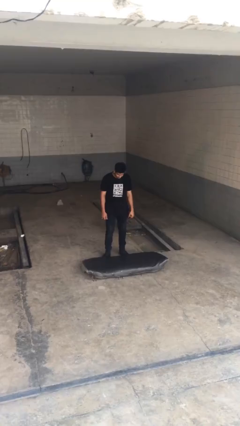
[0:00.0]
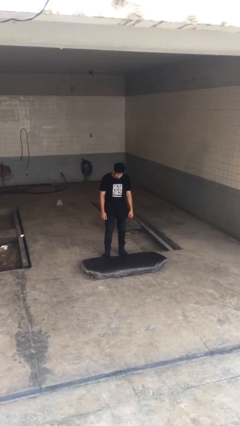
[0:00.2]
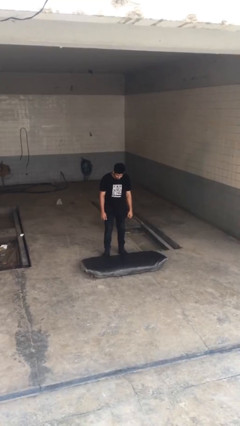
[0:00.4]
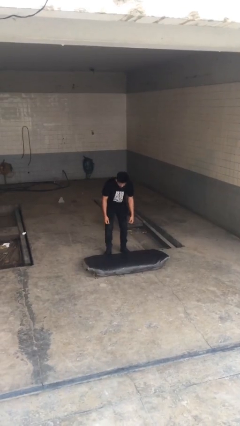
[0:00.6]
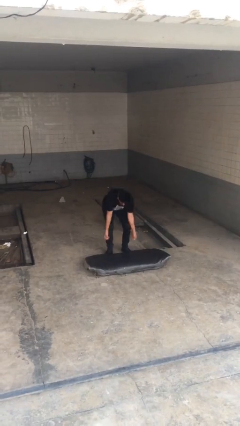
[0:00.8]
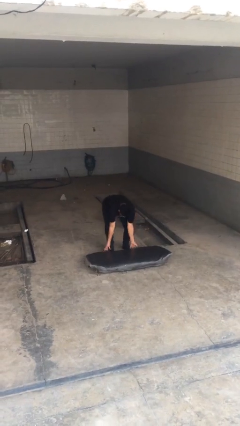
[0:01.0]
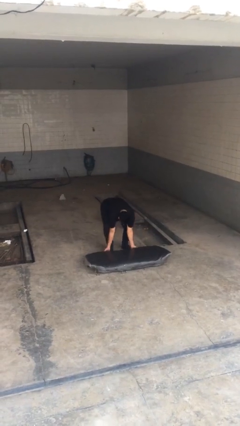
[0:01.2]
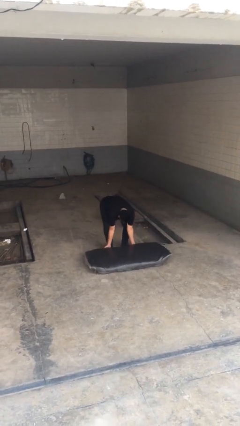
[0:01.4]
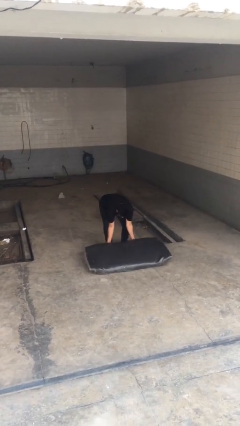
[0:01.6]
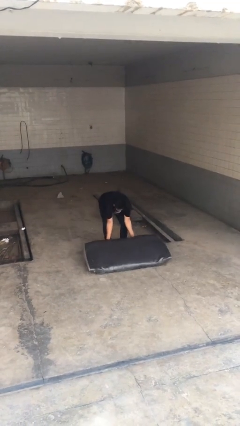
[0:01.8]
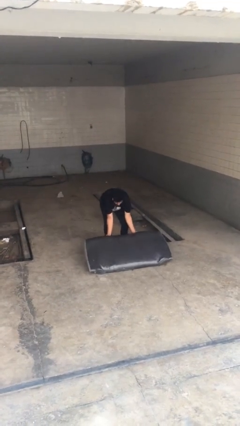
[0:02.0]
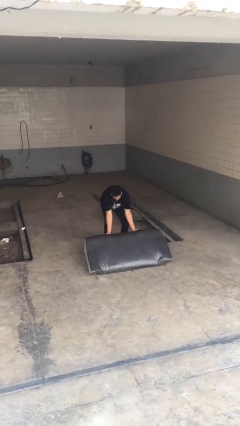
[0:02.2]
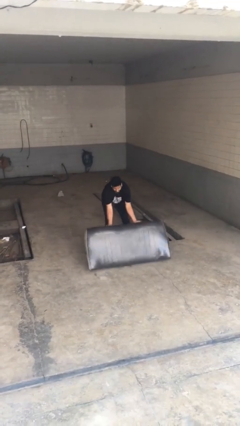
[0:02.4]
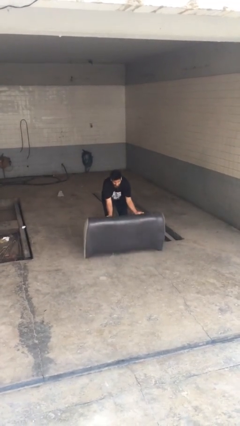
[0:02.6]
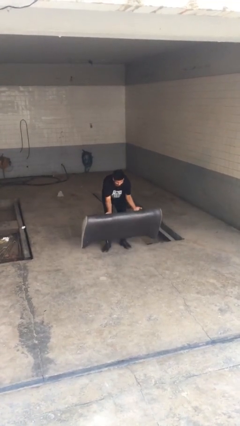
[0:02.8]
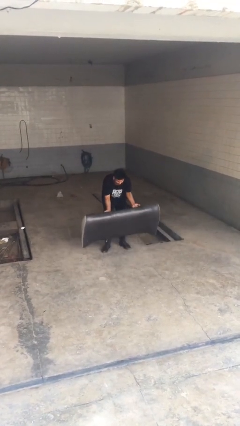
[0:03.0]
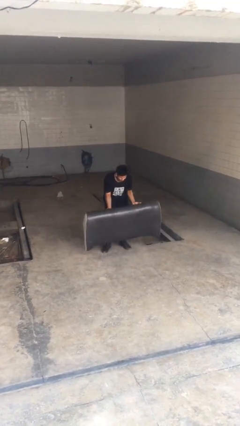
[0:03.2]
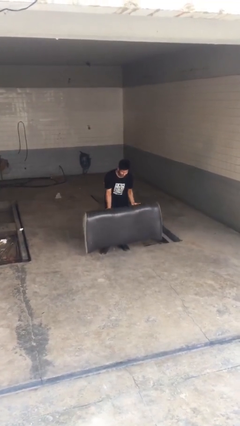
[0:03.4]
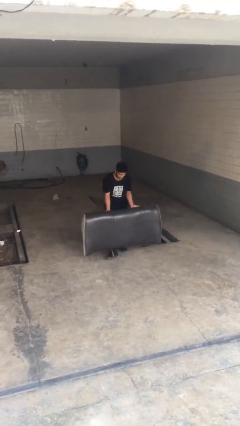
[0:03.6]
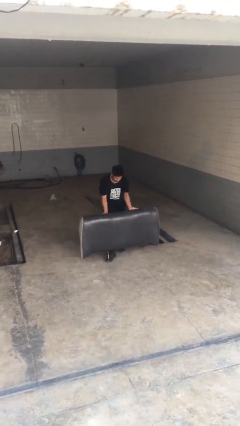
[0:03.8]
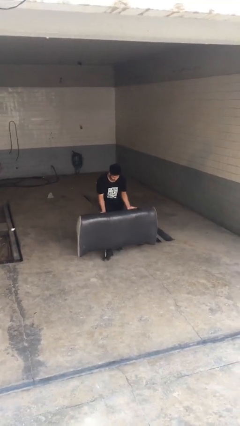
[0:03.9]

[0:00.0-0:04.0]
person picks up object from floor

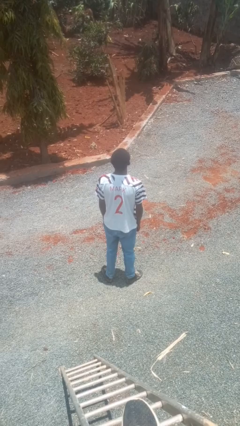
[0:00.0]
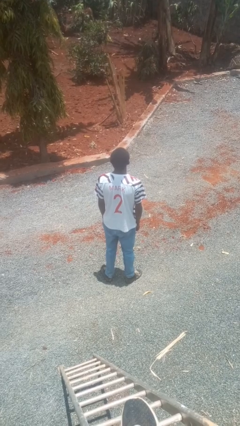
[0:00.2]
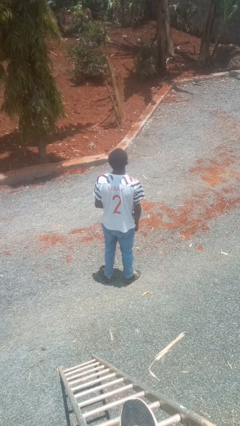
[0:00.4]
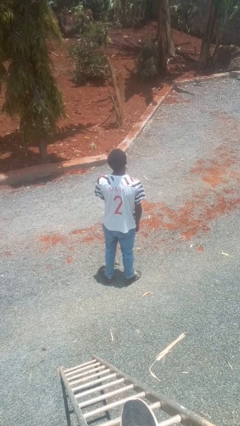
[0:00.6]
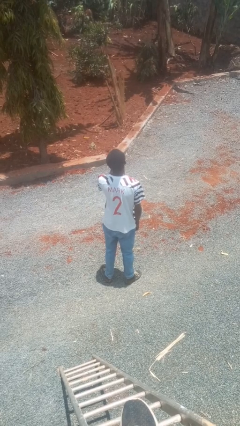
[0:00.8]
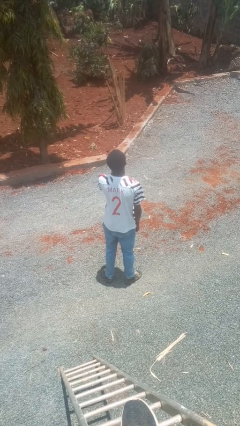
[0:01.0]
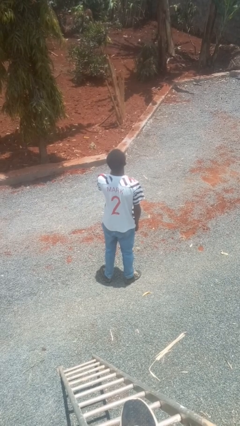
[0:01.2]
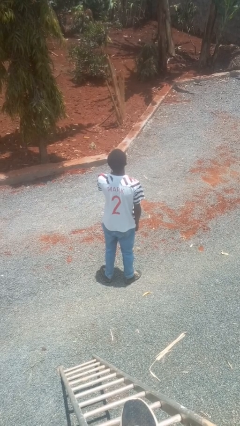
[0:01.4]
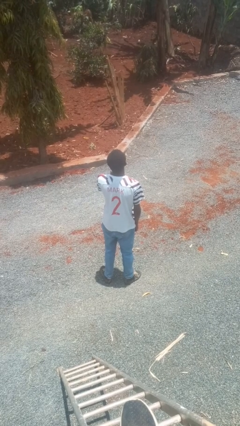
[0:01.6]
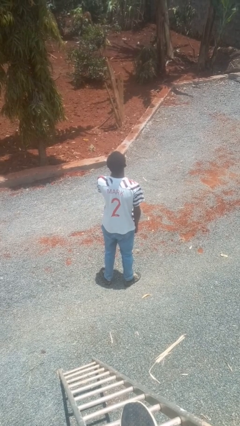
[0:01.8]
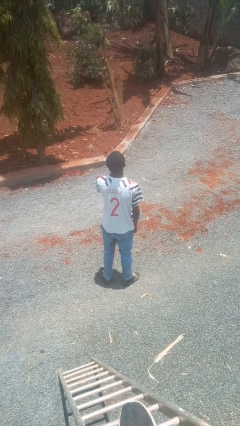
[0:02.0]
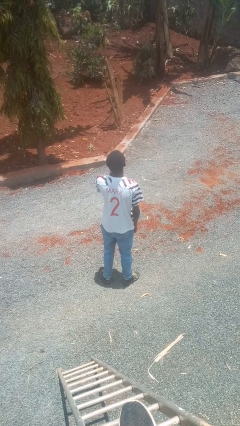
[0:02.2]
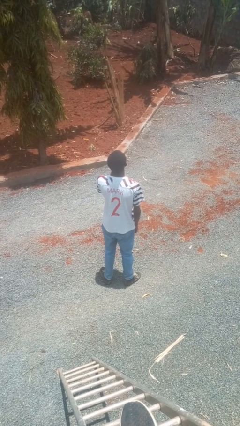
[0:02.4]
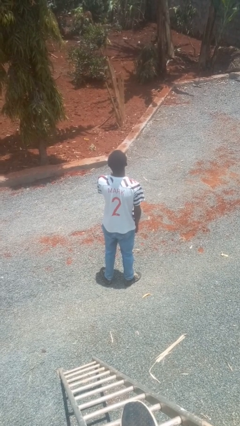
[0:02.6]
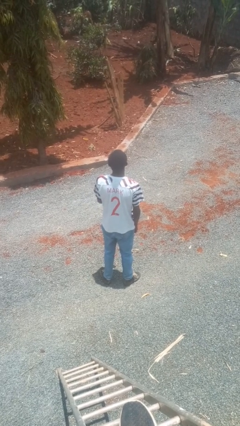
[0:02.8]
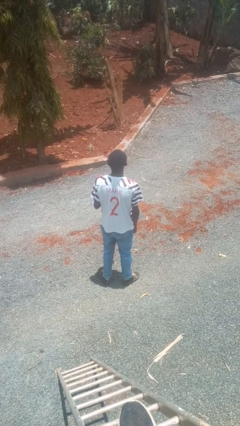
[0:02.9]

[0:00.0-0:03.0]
person strokes chin

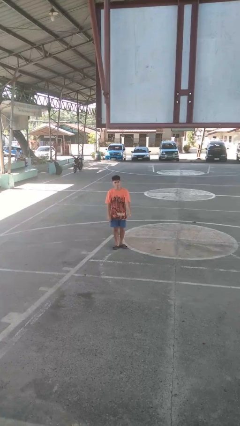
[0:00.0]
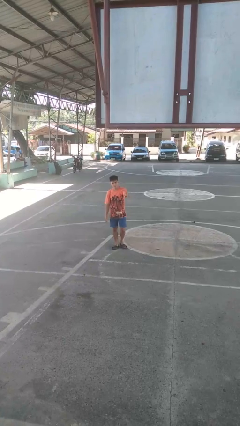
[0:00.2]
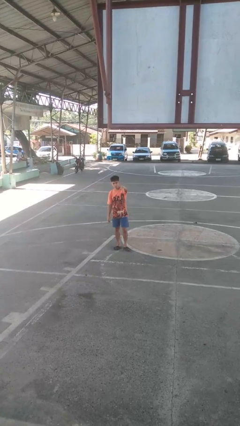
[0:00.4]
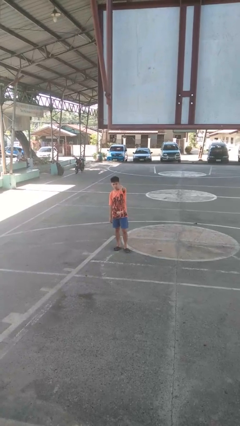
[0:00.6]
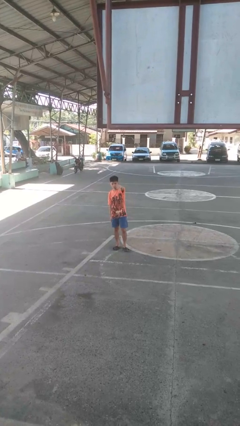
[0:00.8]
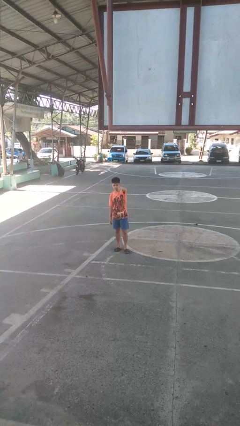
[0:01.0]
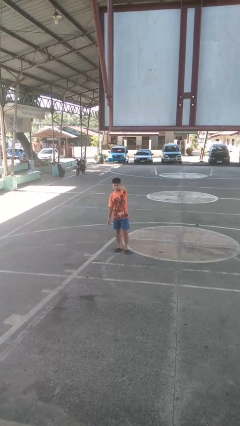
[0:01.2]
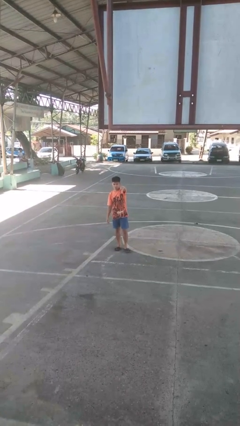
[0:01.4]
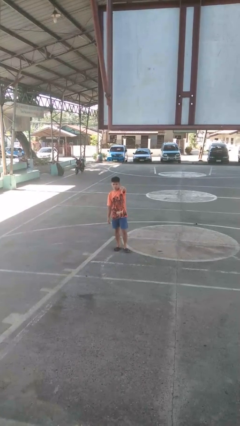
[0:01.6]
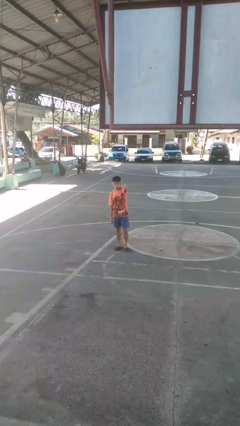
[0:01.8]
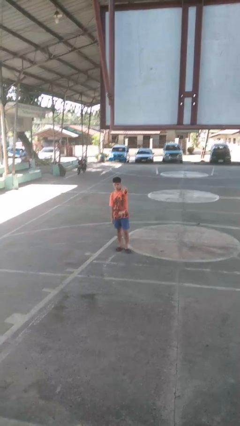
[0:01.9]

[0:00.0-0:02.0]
person gestures thumbs down

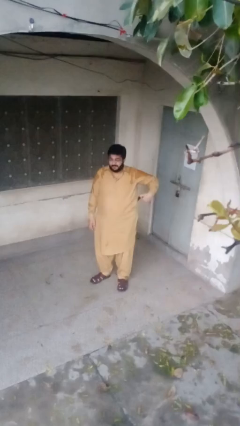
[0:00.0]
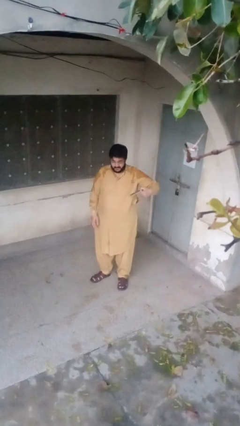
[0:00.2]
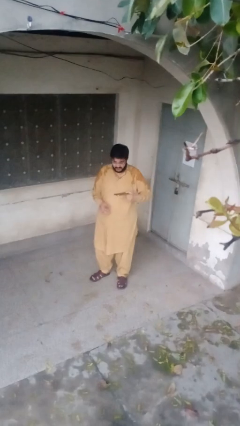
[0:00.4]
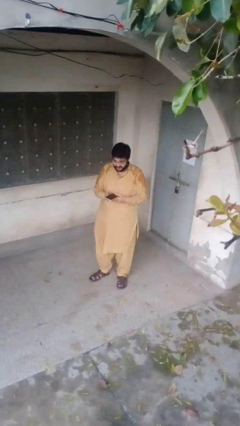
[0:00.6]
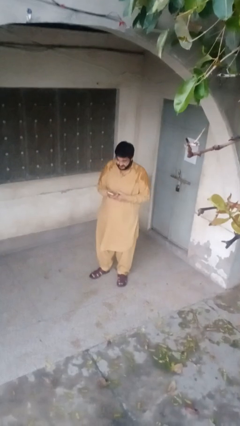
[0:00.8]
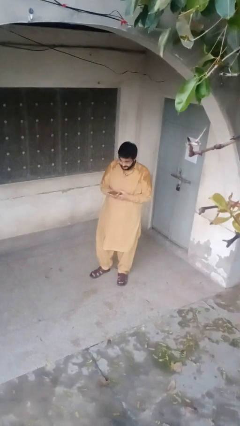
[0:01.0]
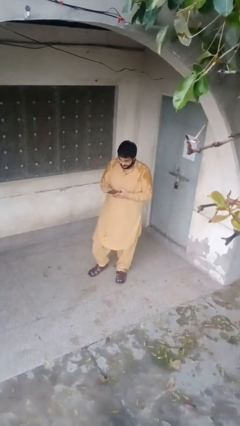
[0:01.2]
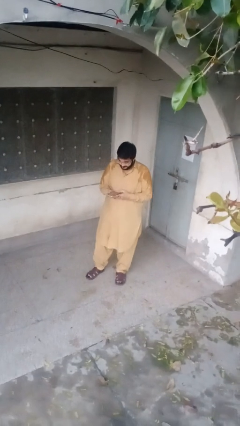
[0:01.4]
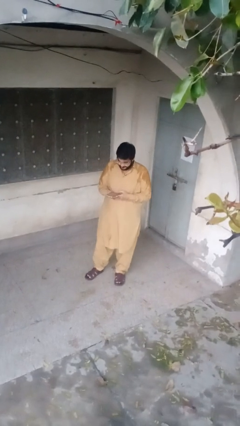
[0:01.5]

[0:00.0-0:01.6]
person takes phone from pocket

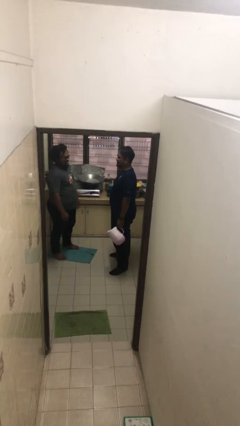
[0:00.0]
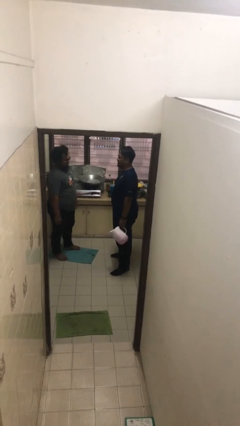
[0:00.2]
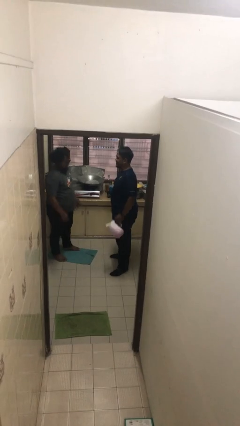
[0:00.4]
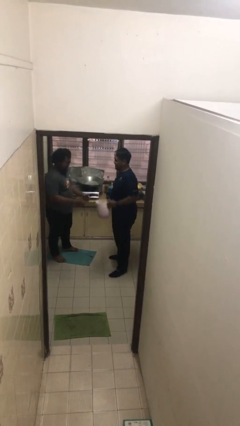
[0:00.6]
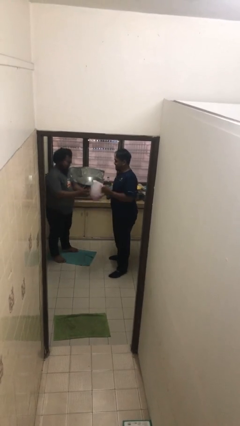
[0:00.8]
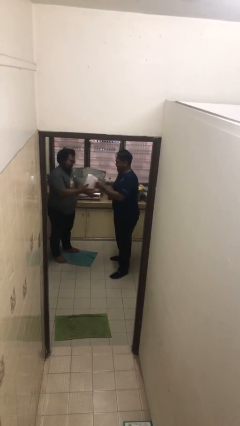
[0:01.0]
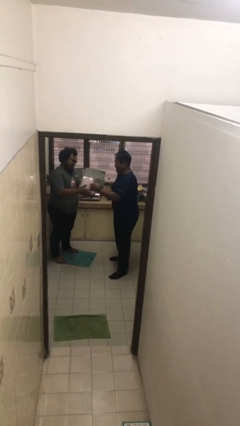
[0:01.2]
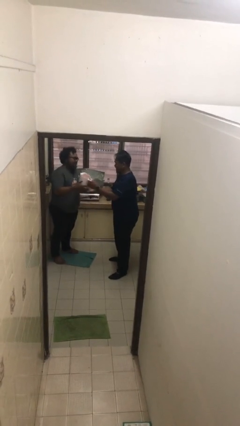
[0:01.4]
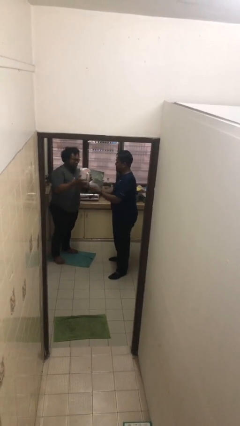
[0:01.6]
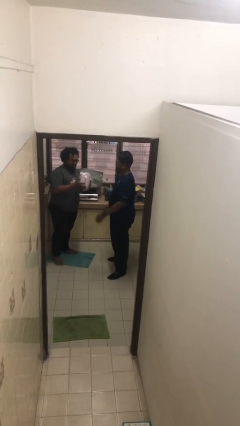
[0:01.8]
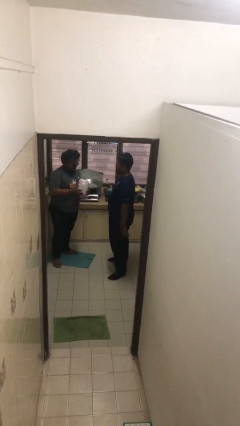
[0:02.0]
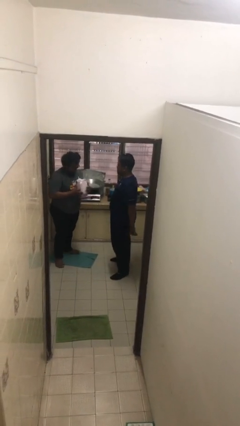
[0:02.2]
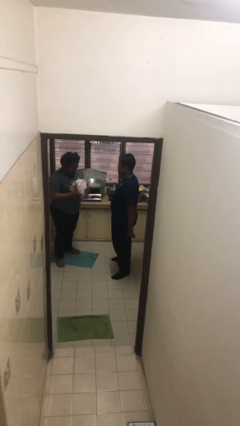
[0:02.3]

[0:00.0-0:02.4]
person transfers object to person

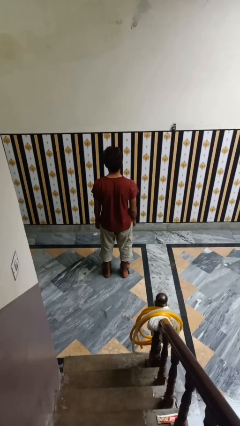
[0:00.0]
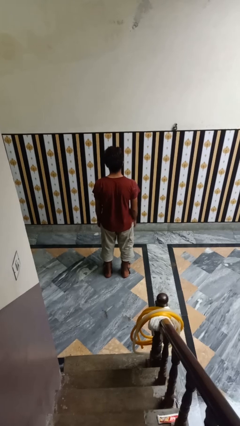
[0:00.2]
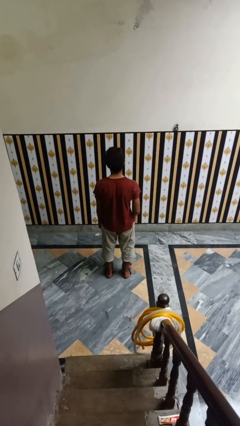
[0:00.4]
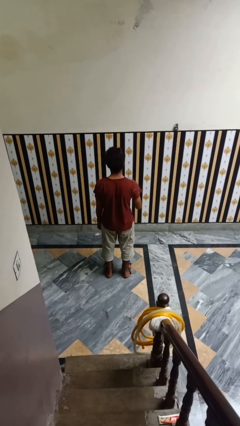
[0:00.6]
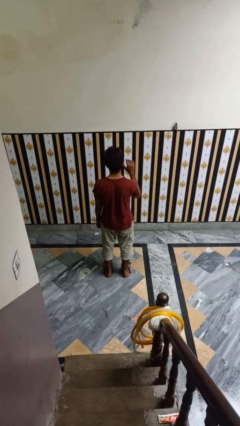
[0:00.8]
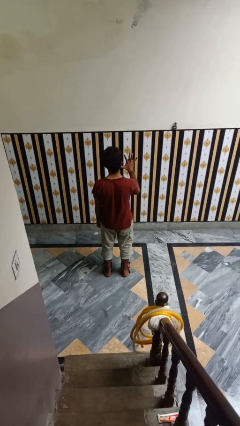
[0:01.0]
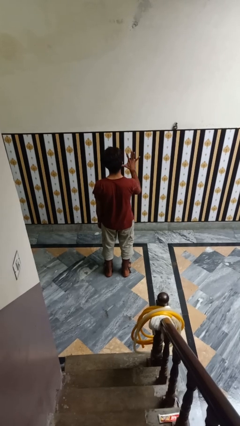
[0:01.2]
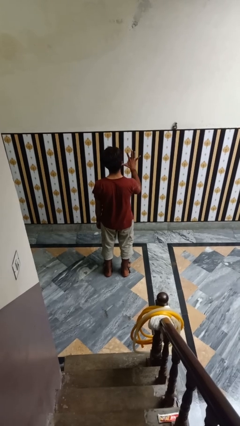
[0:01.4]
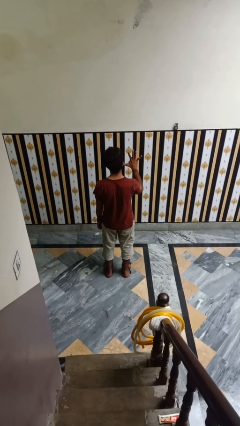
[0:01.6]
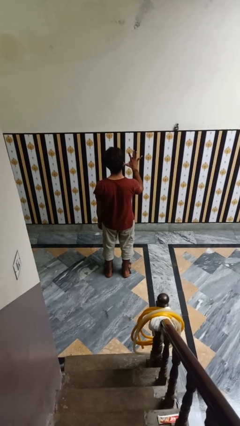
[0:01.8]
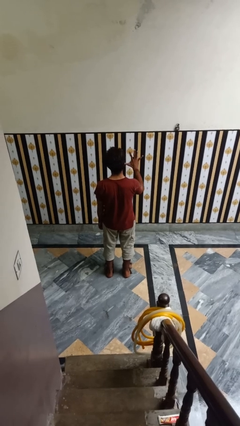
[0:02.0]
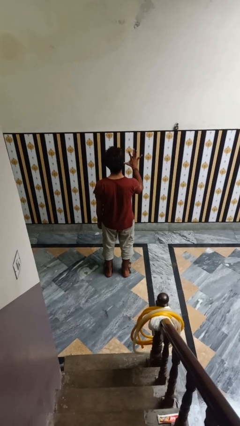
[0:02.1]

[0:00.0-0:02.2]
person gestures number five

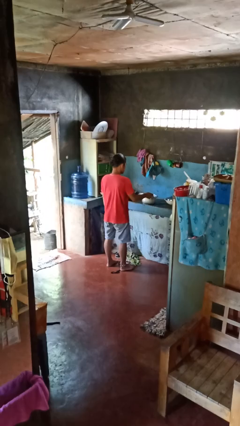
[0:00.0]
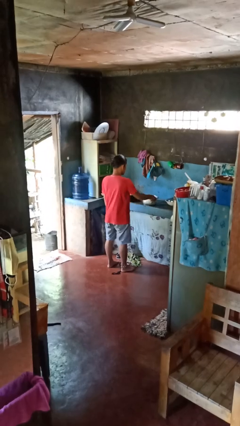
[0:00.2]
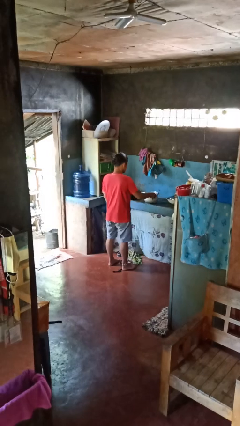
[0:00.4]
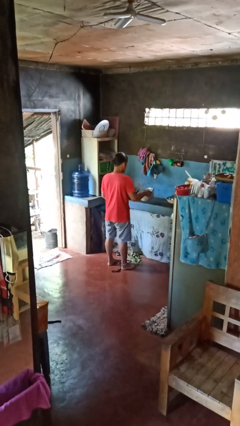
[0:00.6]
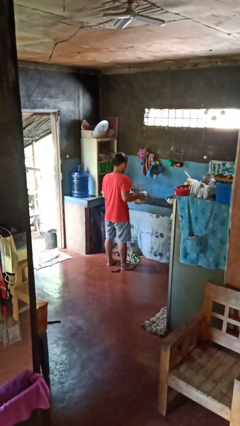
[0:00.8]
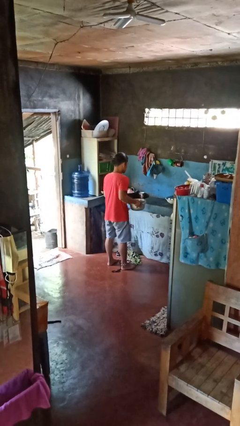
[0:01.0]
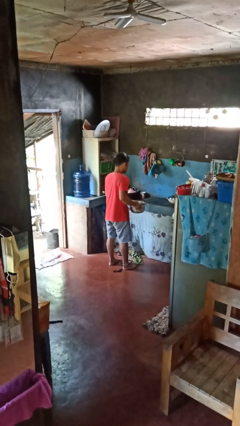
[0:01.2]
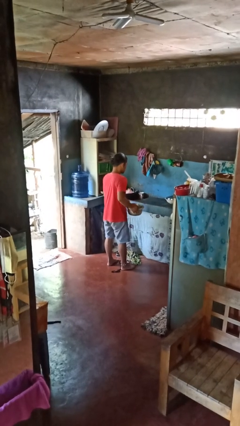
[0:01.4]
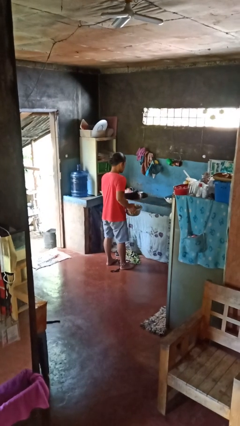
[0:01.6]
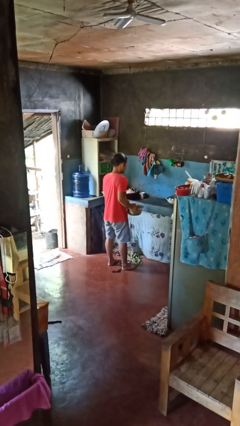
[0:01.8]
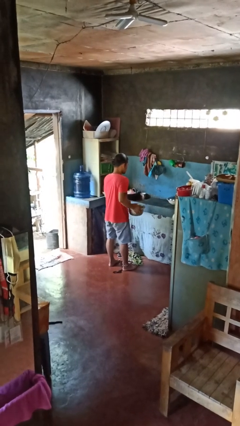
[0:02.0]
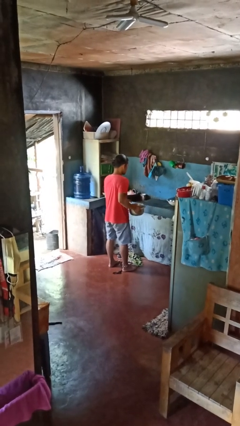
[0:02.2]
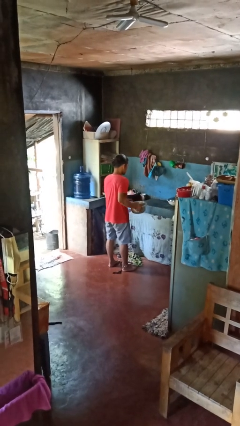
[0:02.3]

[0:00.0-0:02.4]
person picks up object from countertop
